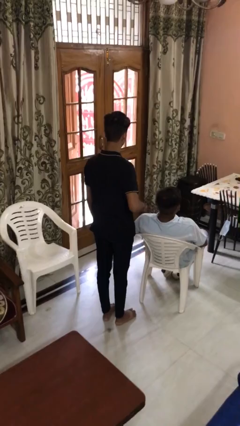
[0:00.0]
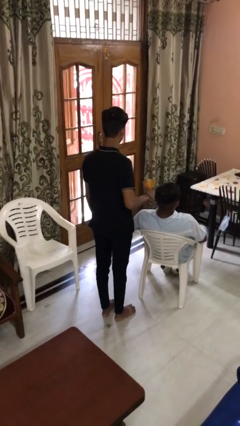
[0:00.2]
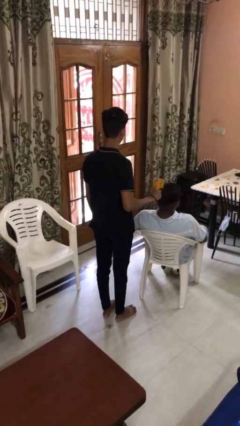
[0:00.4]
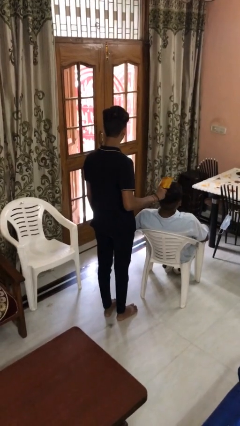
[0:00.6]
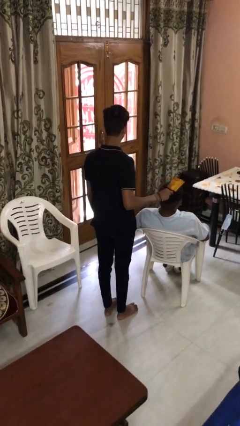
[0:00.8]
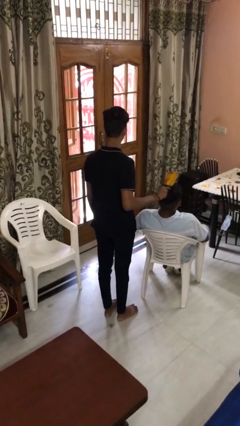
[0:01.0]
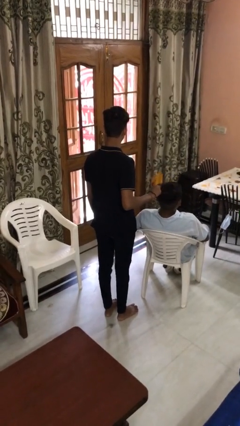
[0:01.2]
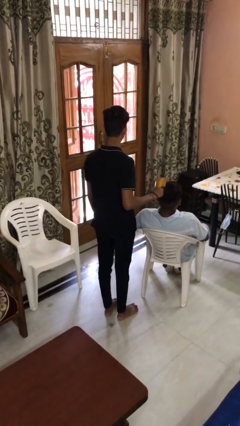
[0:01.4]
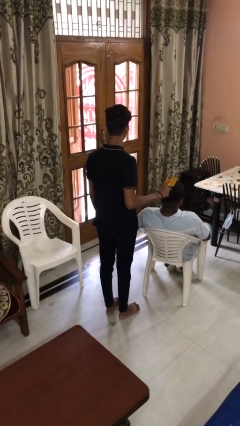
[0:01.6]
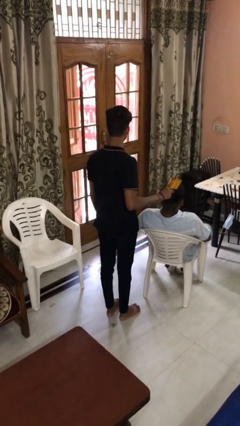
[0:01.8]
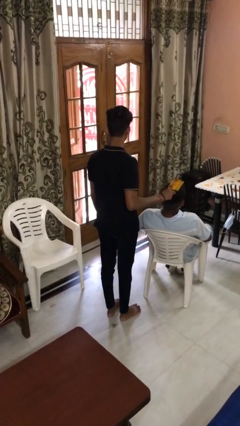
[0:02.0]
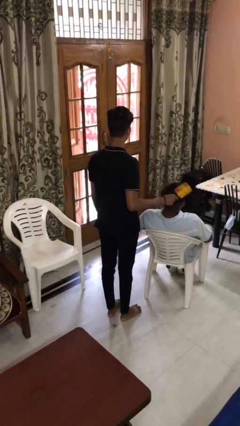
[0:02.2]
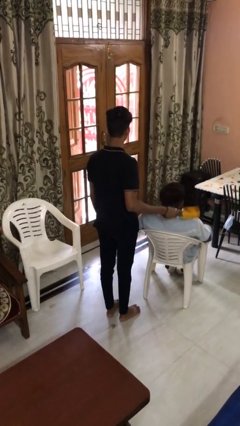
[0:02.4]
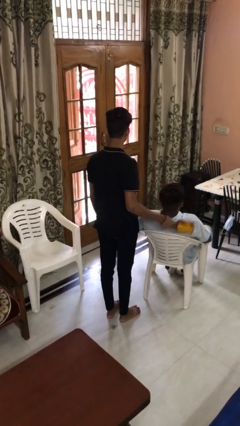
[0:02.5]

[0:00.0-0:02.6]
person brushes hair of person

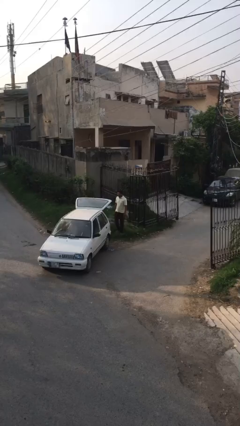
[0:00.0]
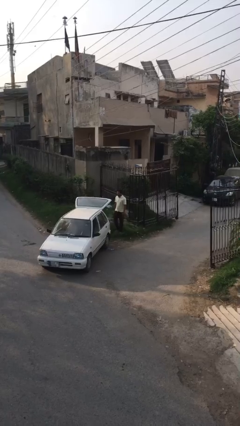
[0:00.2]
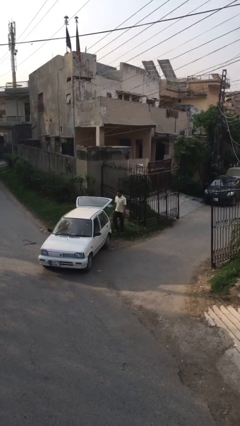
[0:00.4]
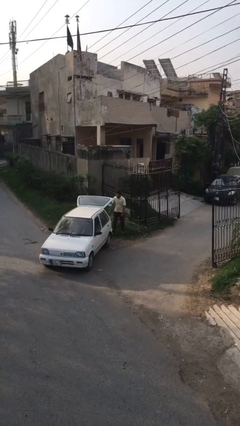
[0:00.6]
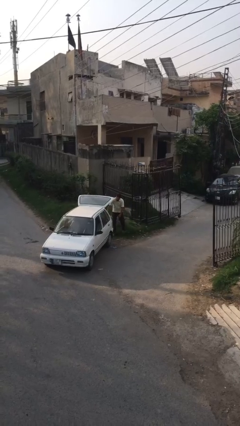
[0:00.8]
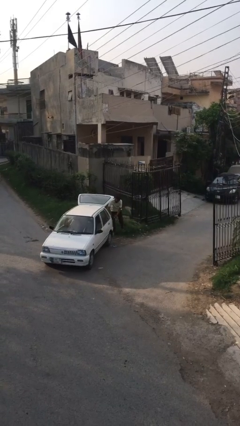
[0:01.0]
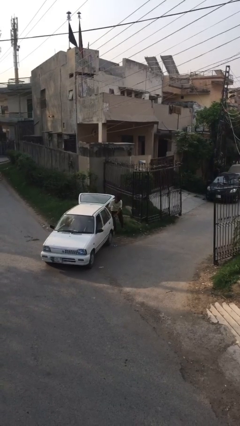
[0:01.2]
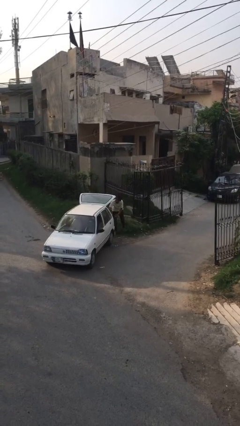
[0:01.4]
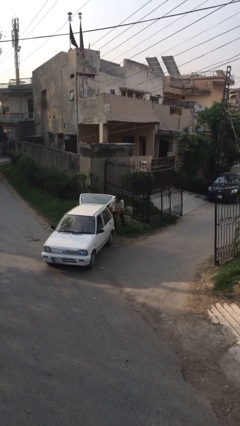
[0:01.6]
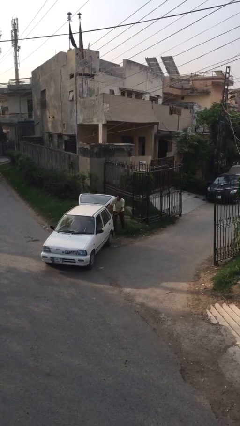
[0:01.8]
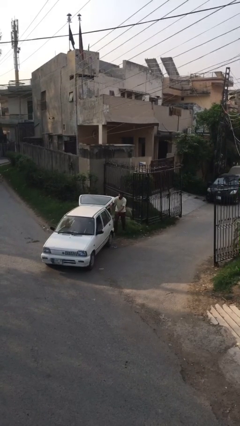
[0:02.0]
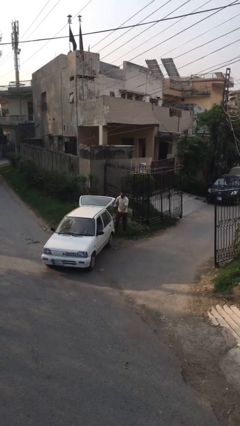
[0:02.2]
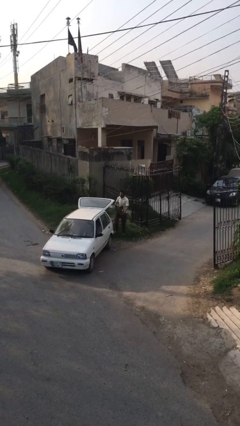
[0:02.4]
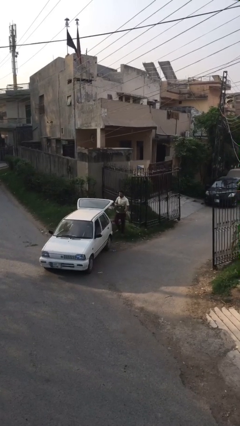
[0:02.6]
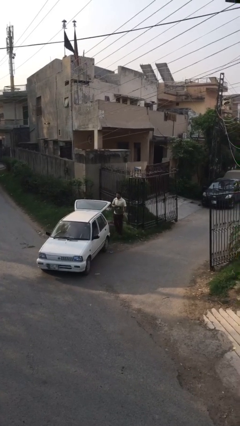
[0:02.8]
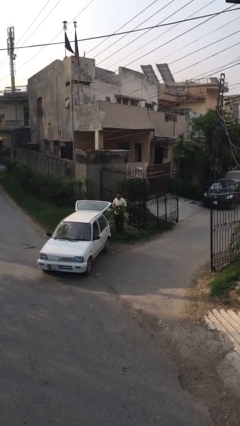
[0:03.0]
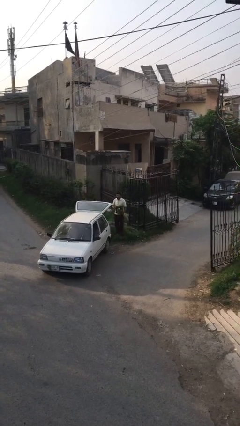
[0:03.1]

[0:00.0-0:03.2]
person unloads car

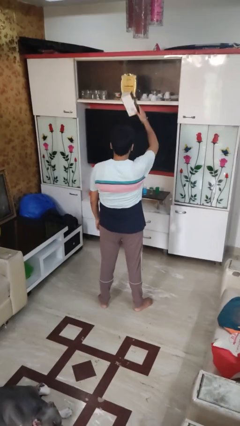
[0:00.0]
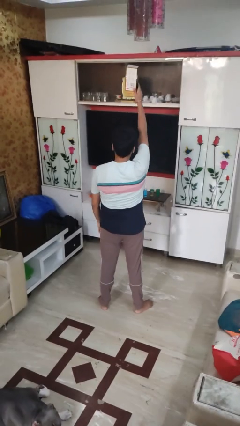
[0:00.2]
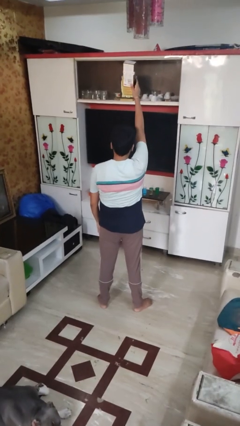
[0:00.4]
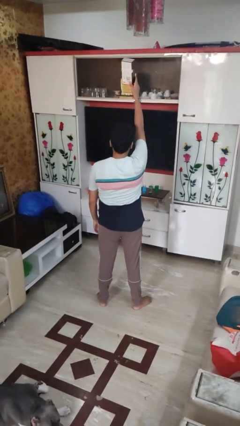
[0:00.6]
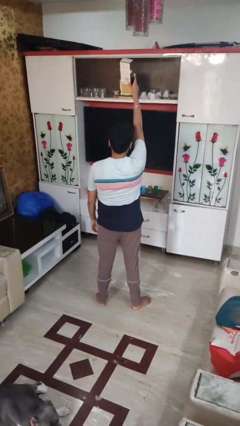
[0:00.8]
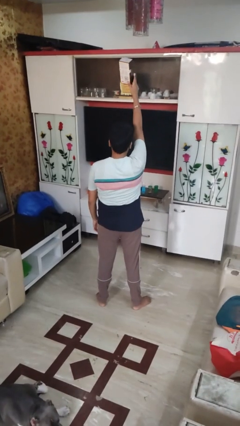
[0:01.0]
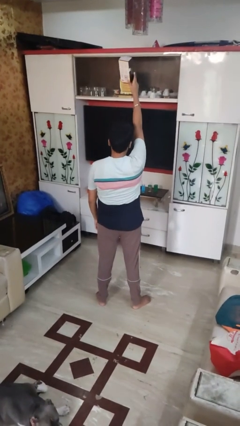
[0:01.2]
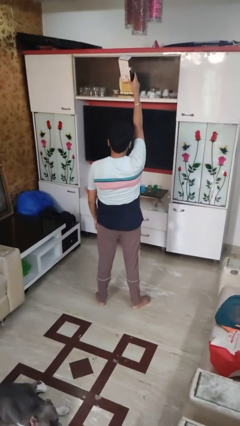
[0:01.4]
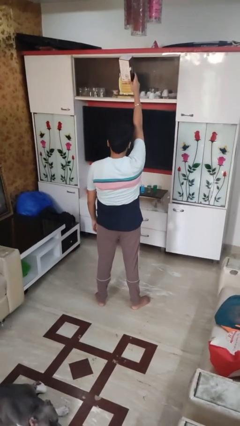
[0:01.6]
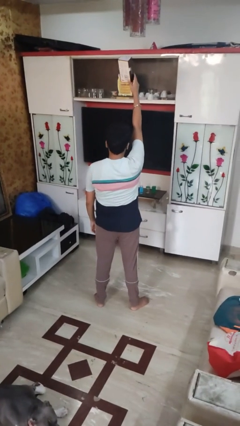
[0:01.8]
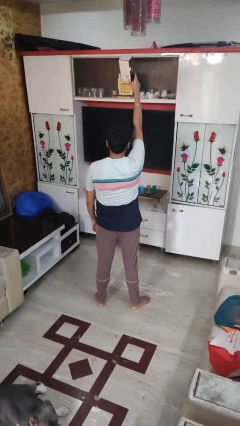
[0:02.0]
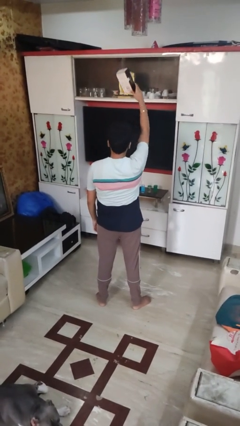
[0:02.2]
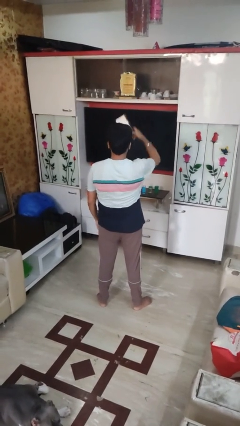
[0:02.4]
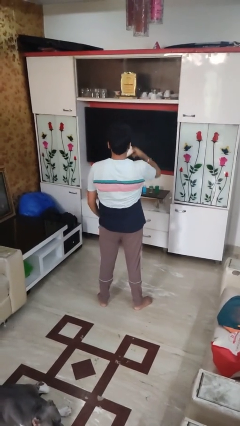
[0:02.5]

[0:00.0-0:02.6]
person holds object above head

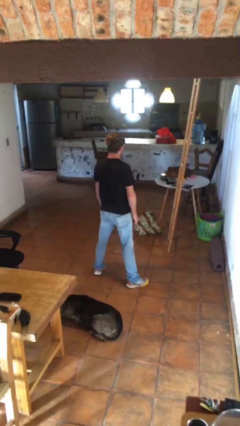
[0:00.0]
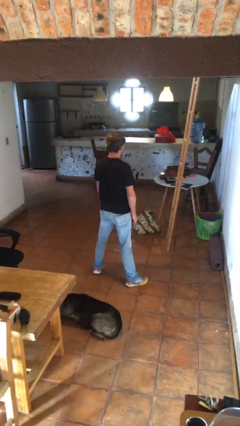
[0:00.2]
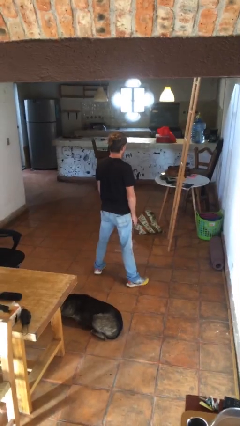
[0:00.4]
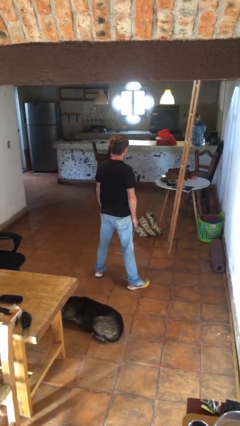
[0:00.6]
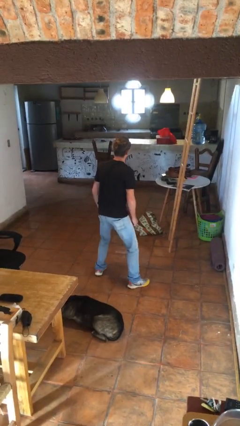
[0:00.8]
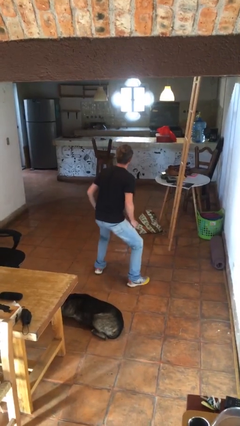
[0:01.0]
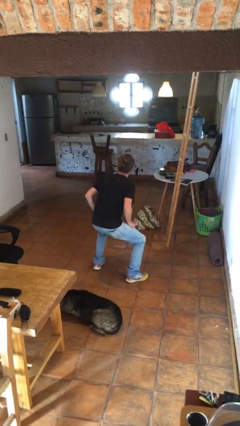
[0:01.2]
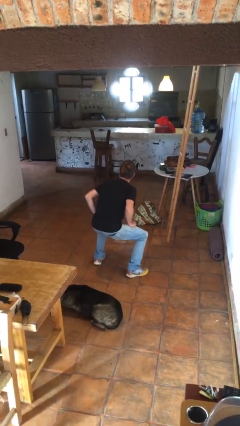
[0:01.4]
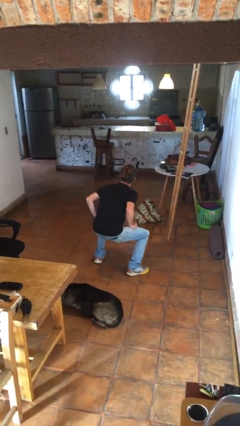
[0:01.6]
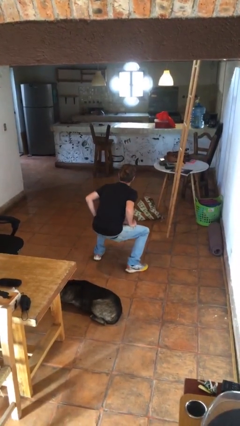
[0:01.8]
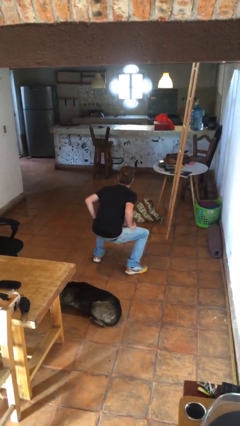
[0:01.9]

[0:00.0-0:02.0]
person squats

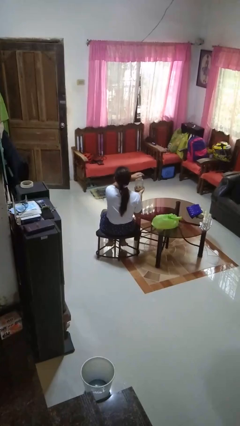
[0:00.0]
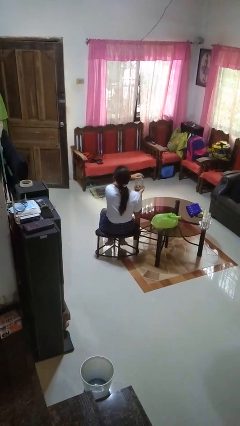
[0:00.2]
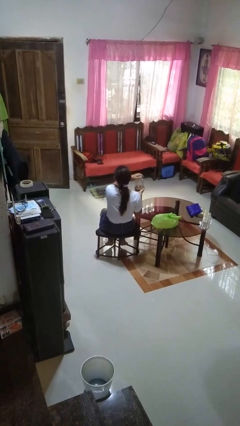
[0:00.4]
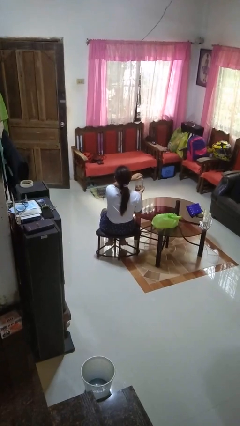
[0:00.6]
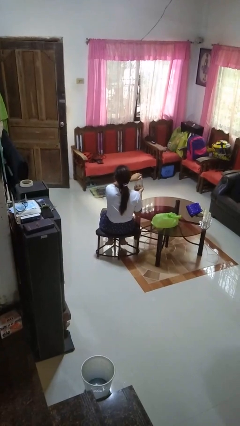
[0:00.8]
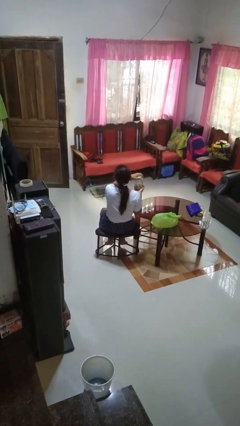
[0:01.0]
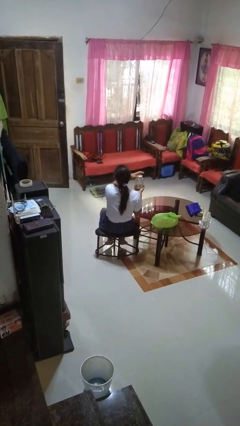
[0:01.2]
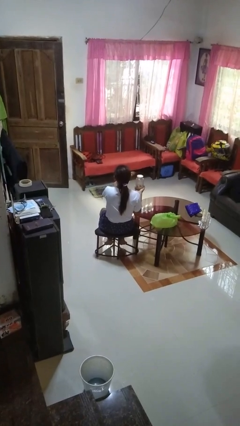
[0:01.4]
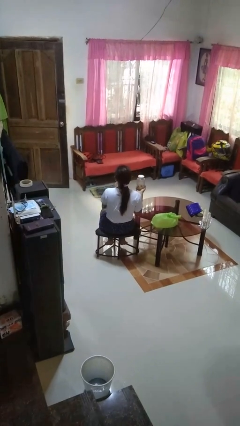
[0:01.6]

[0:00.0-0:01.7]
person closes jar

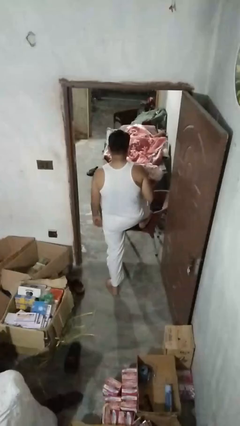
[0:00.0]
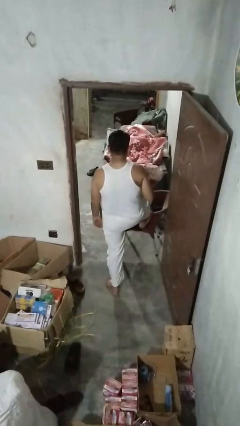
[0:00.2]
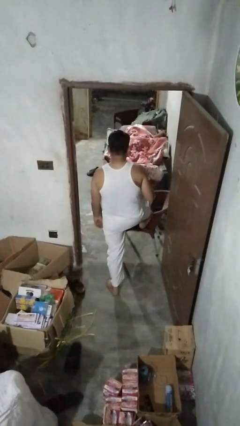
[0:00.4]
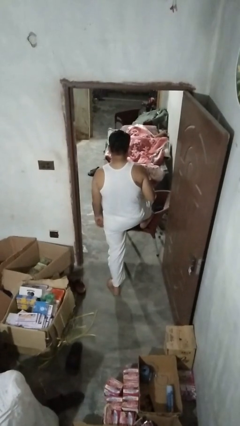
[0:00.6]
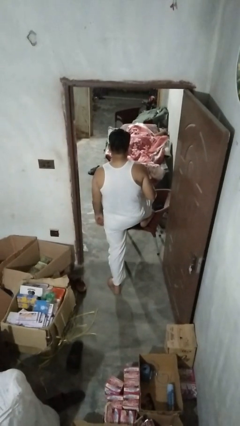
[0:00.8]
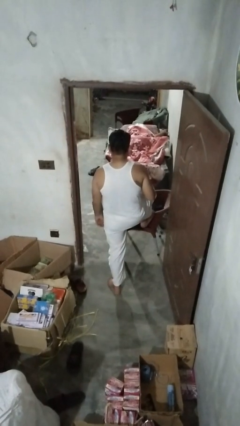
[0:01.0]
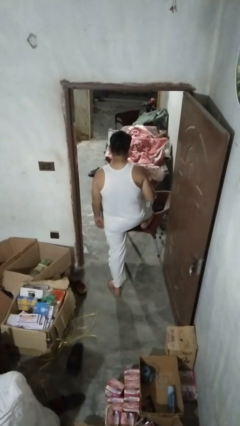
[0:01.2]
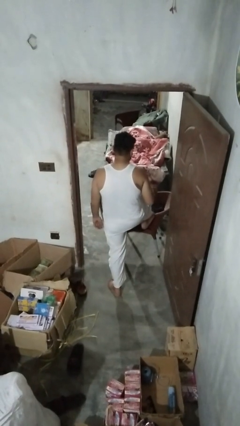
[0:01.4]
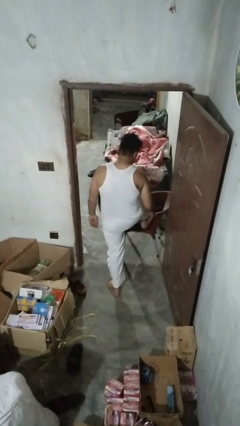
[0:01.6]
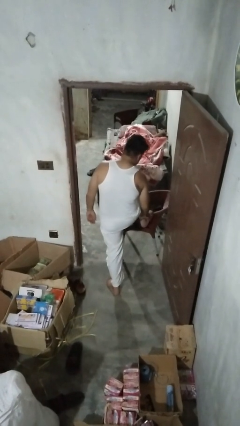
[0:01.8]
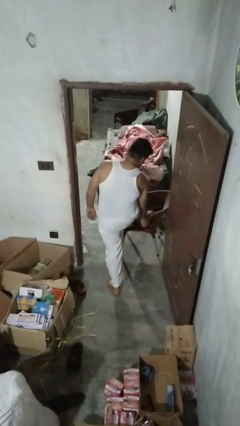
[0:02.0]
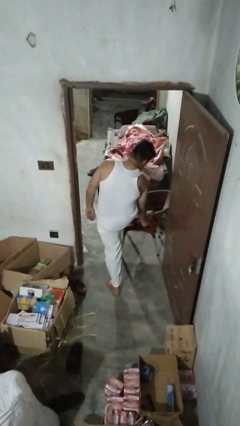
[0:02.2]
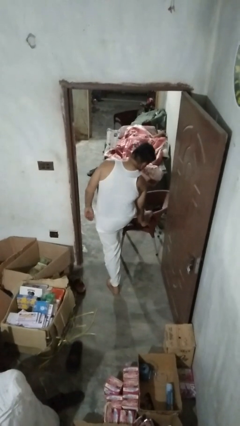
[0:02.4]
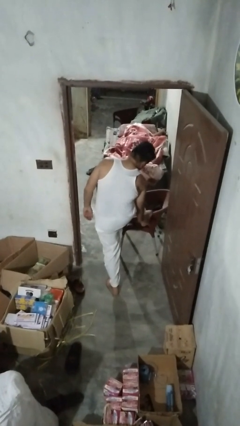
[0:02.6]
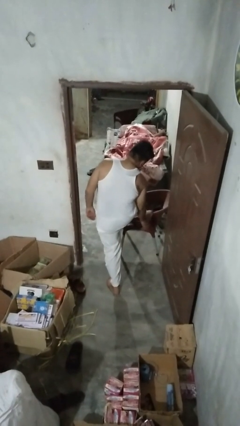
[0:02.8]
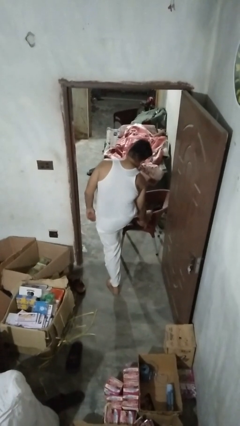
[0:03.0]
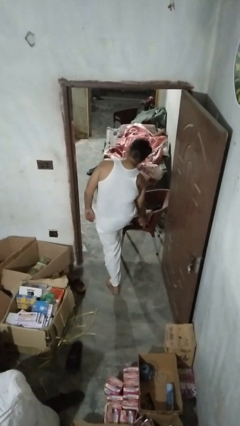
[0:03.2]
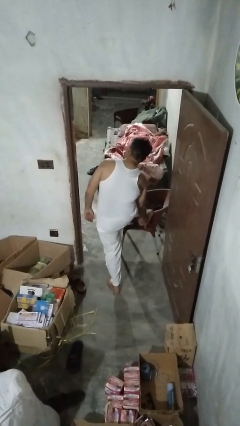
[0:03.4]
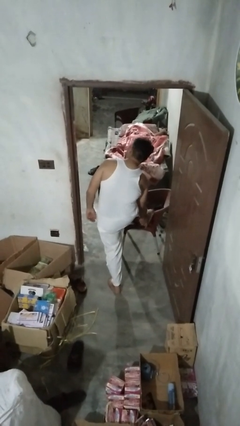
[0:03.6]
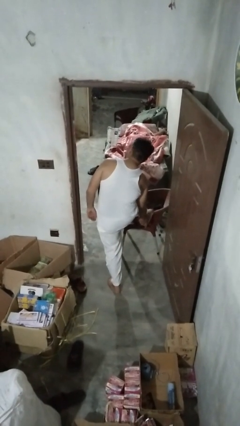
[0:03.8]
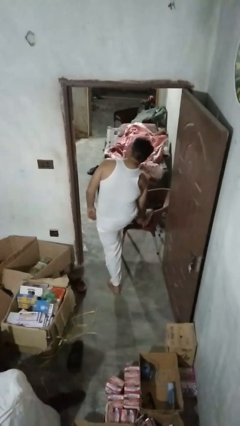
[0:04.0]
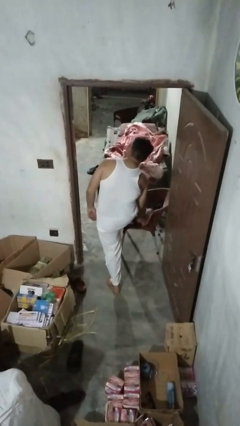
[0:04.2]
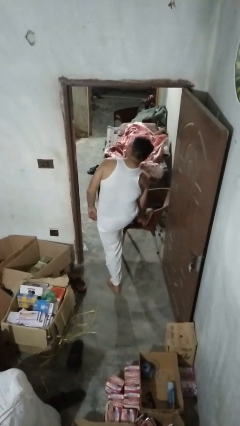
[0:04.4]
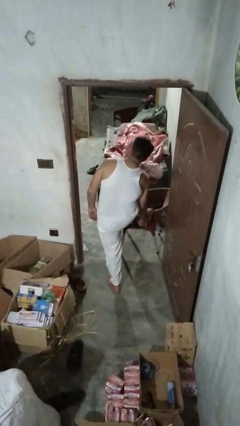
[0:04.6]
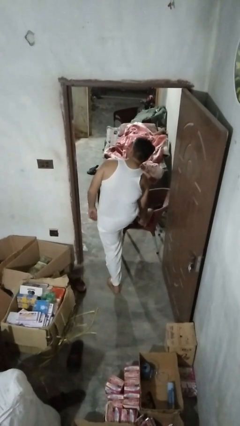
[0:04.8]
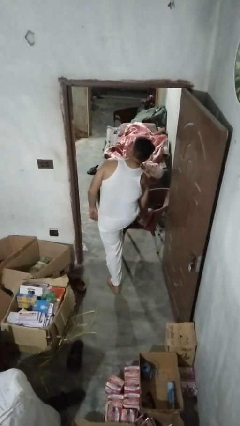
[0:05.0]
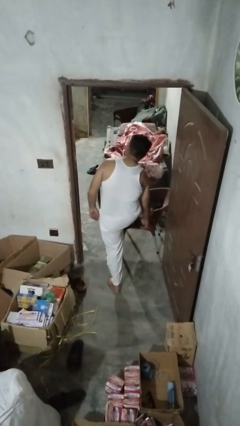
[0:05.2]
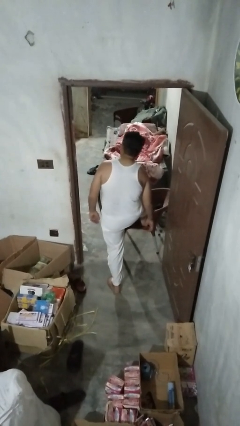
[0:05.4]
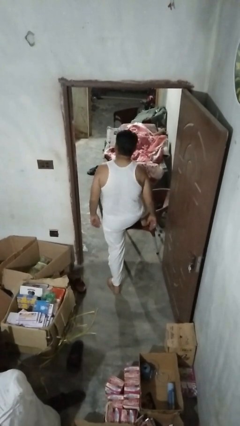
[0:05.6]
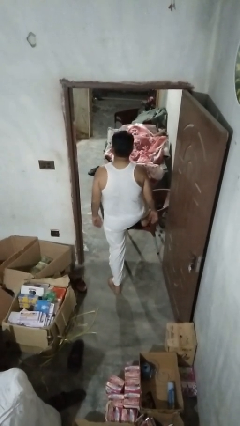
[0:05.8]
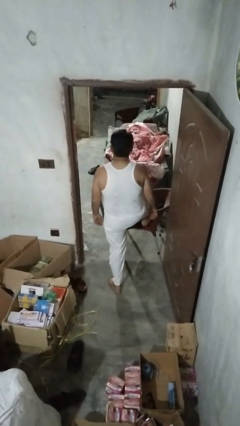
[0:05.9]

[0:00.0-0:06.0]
person stubs toe
